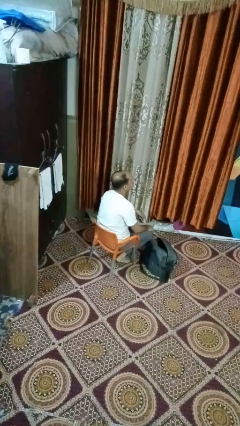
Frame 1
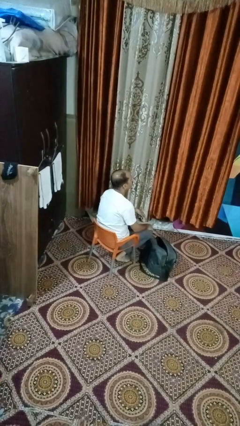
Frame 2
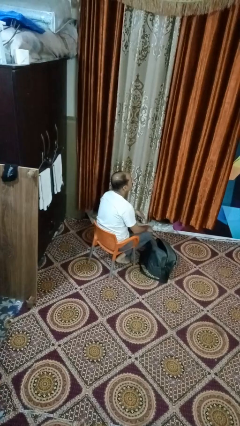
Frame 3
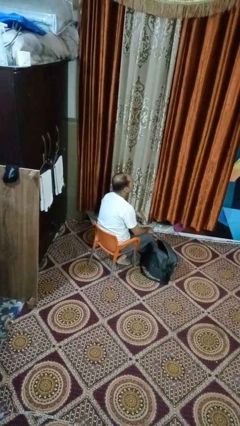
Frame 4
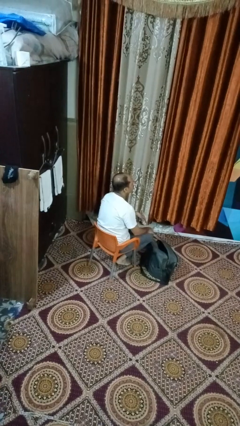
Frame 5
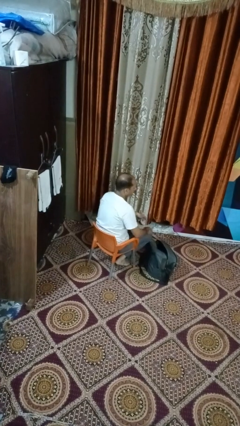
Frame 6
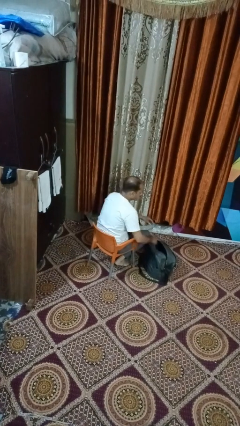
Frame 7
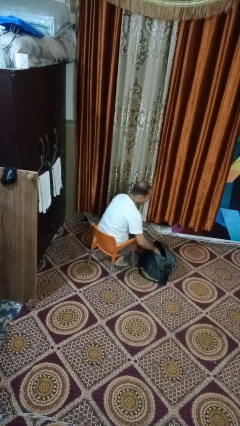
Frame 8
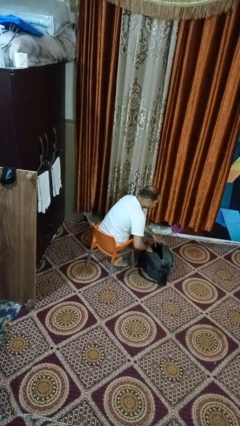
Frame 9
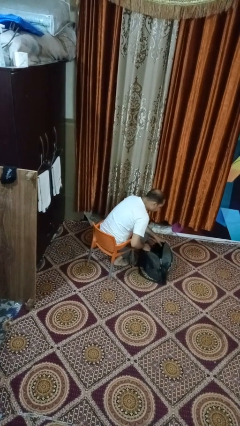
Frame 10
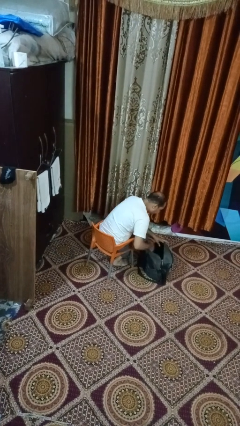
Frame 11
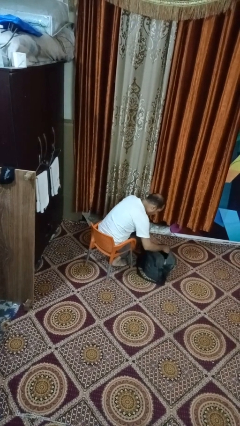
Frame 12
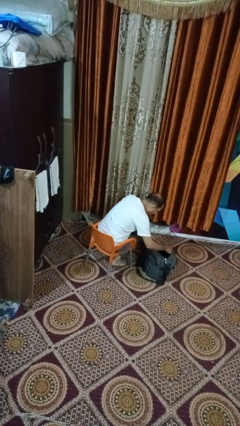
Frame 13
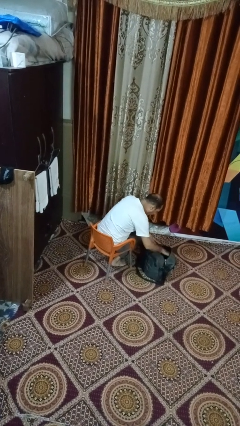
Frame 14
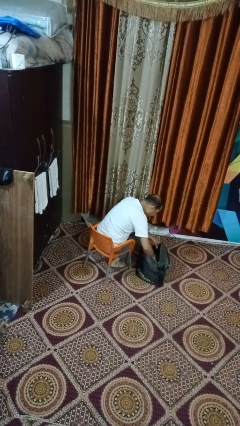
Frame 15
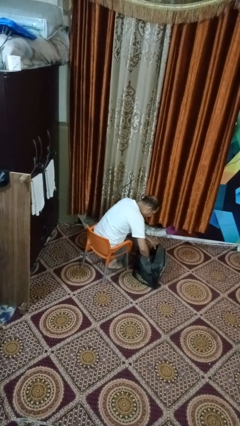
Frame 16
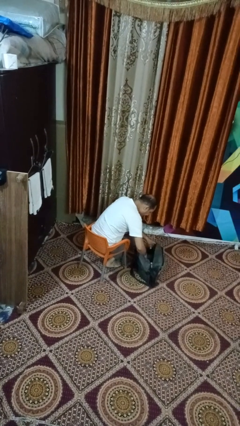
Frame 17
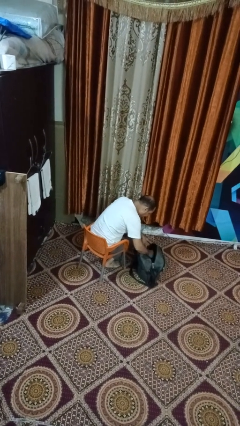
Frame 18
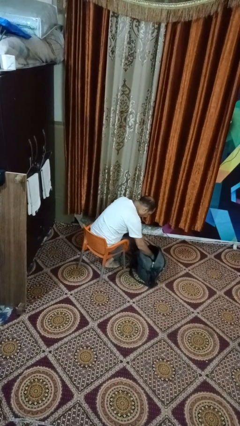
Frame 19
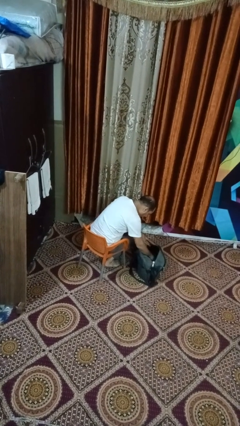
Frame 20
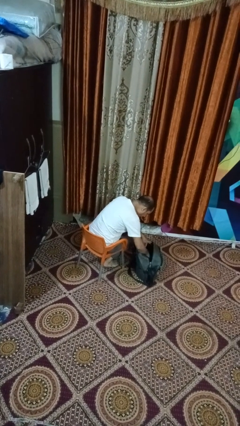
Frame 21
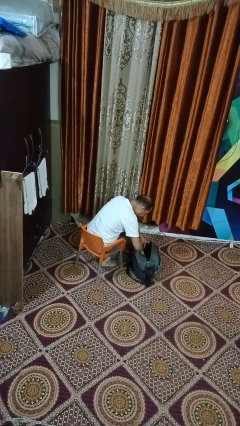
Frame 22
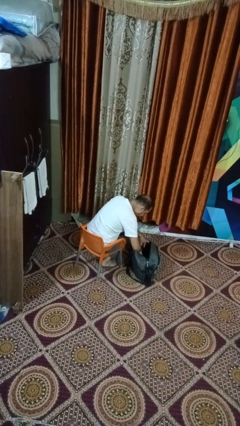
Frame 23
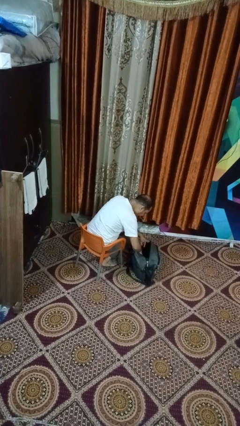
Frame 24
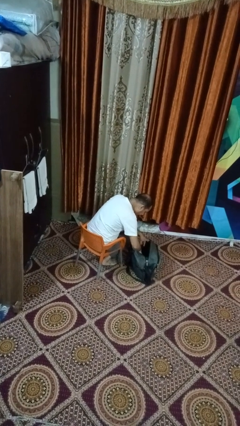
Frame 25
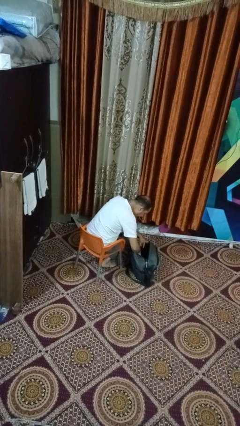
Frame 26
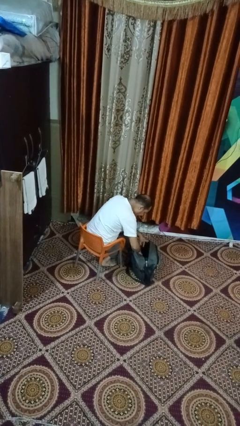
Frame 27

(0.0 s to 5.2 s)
person searches in backpack

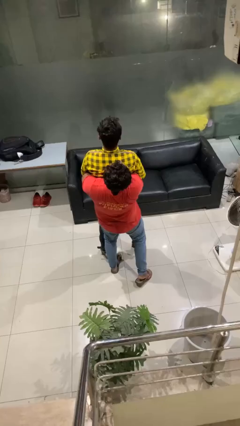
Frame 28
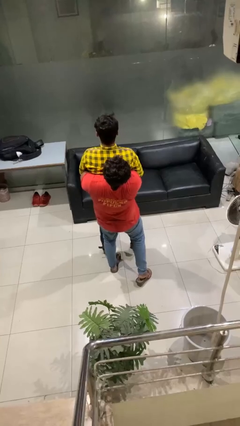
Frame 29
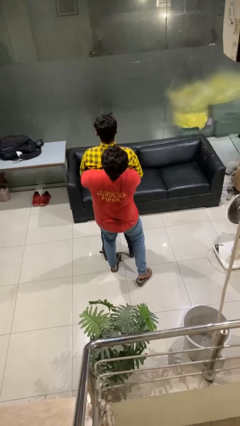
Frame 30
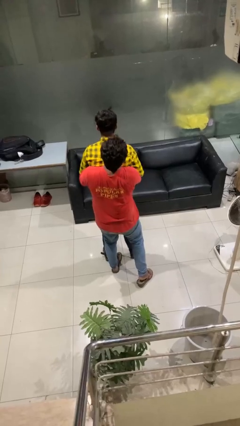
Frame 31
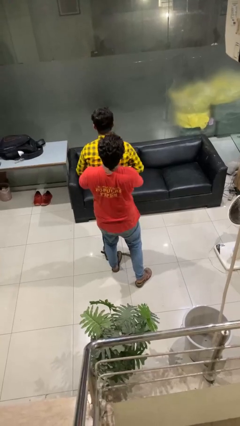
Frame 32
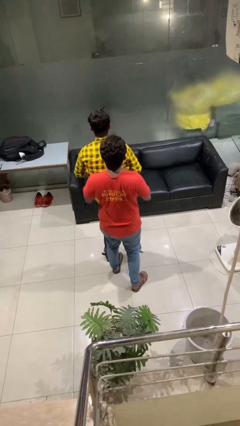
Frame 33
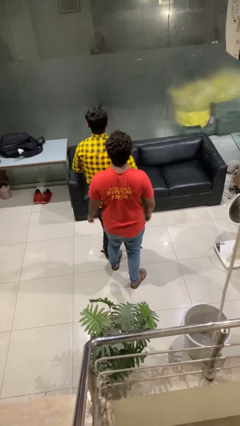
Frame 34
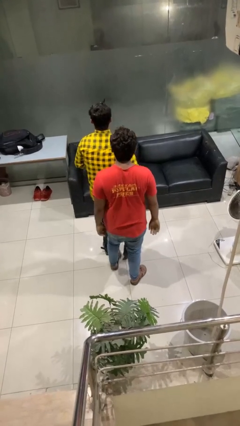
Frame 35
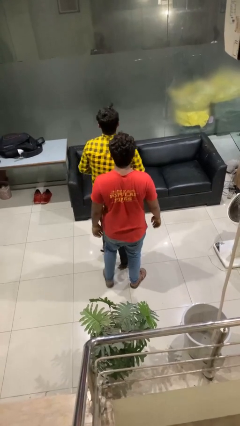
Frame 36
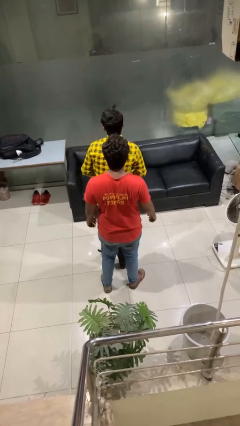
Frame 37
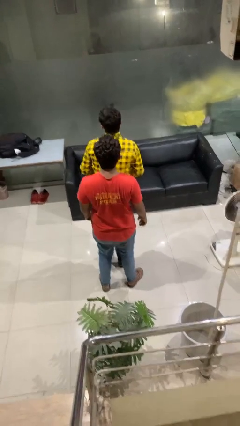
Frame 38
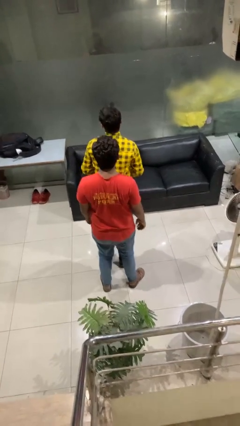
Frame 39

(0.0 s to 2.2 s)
person puts down person

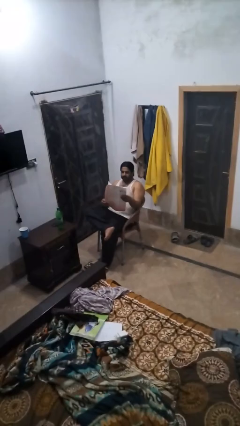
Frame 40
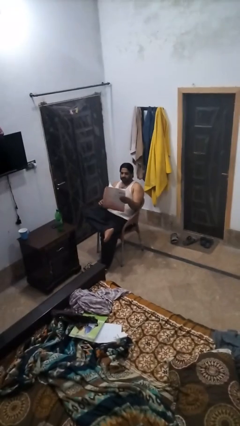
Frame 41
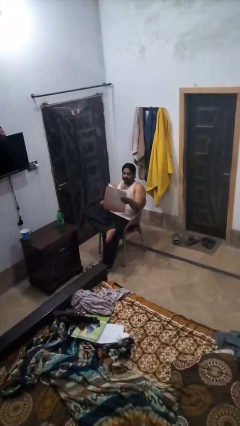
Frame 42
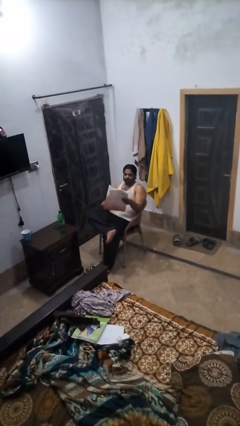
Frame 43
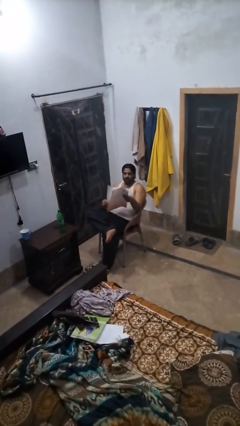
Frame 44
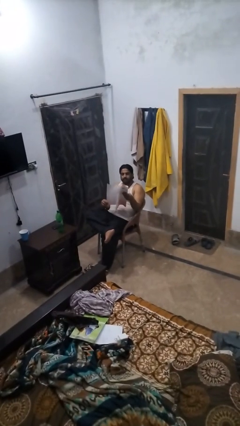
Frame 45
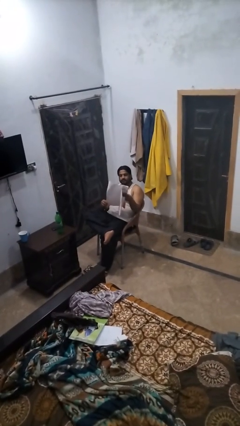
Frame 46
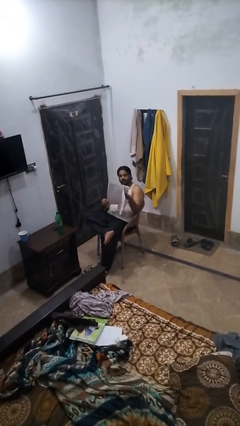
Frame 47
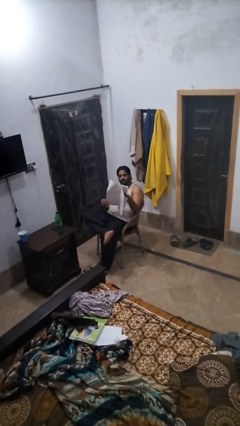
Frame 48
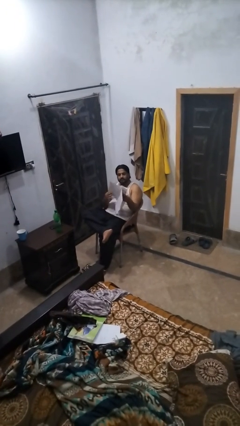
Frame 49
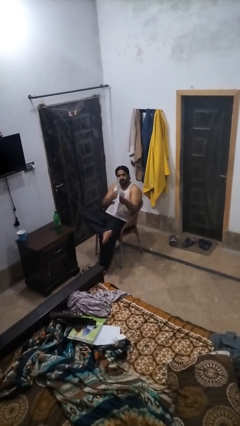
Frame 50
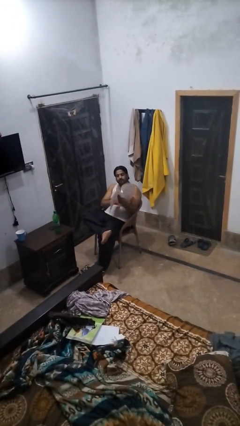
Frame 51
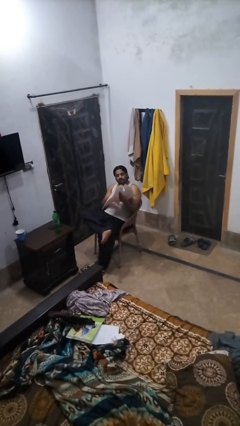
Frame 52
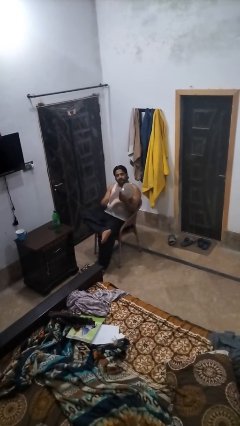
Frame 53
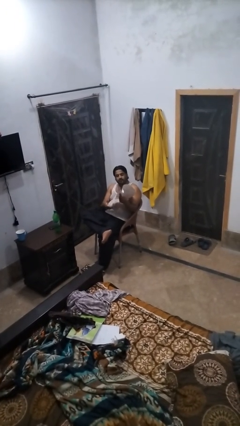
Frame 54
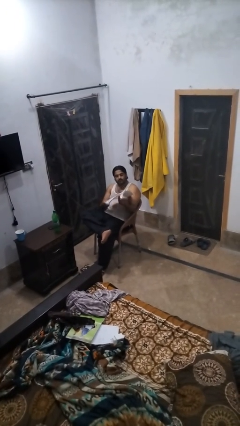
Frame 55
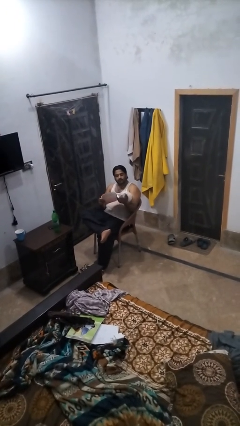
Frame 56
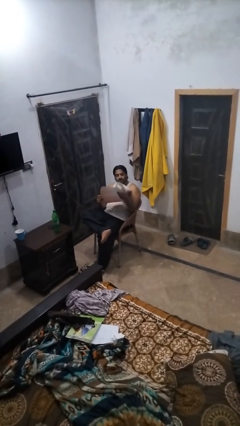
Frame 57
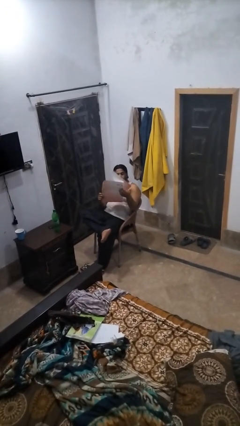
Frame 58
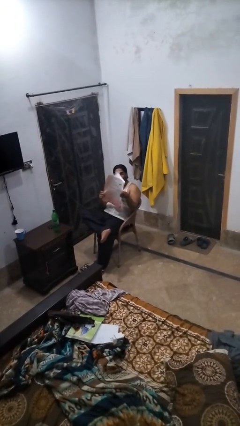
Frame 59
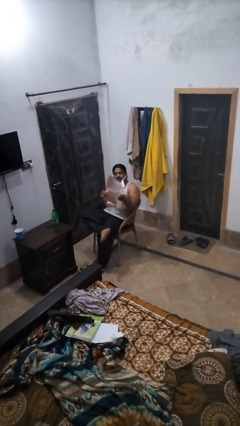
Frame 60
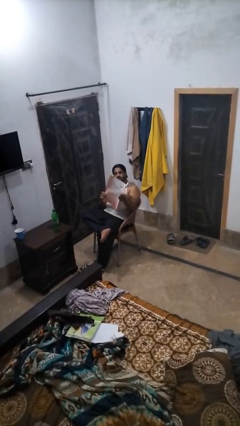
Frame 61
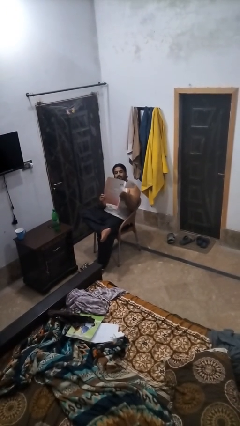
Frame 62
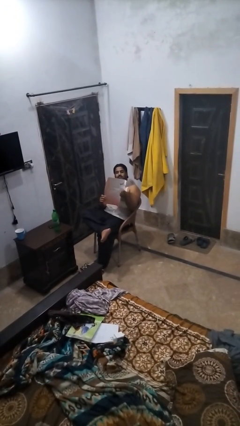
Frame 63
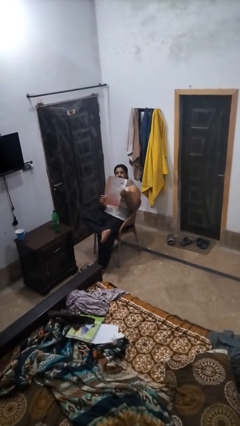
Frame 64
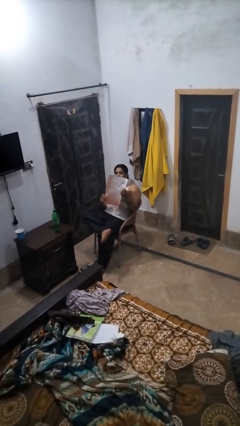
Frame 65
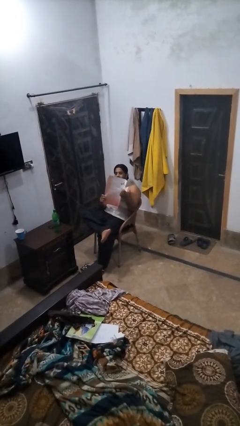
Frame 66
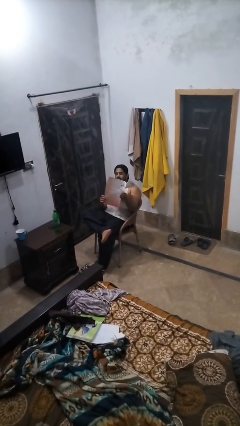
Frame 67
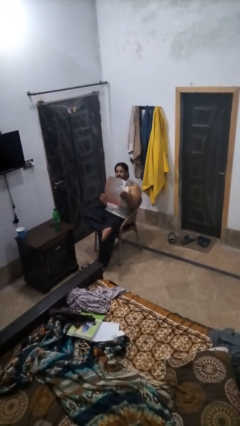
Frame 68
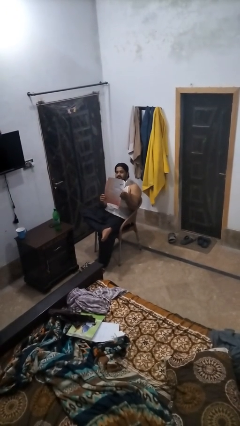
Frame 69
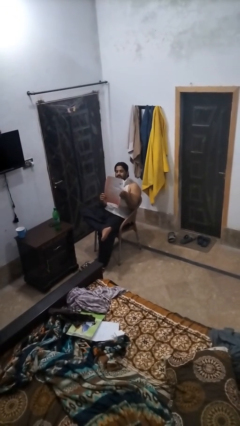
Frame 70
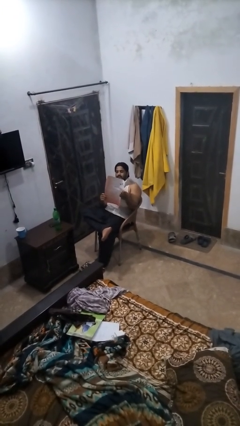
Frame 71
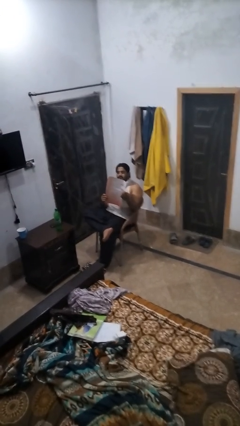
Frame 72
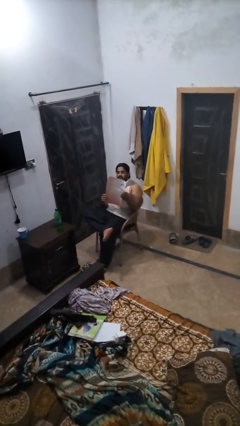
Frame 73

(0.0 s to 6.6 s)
person reads newspaper

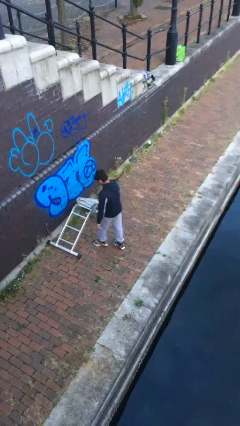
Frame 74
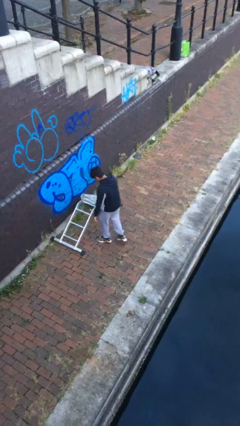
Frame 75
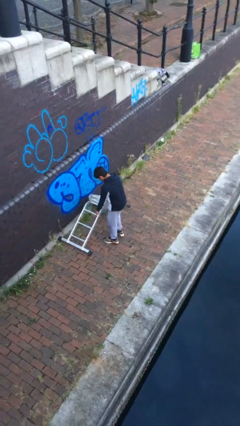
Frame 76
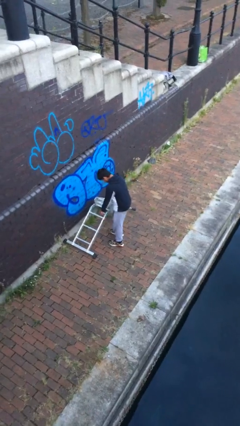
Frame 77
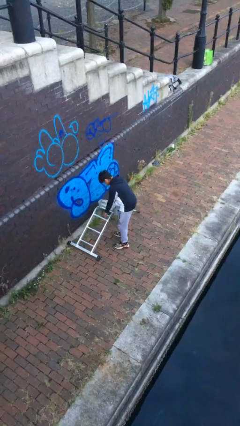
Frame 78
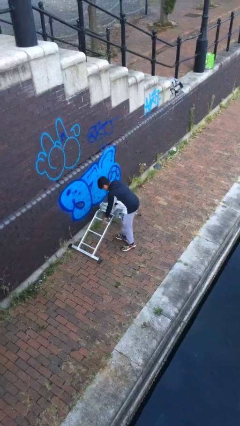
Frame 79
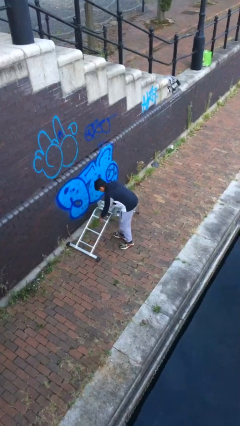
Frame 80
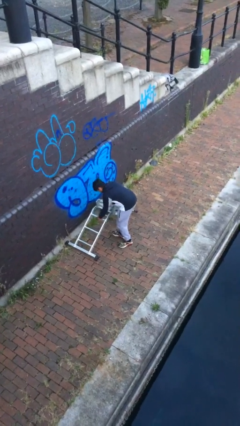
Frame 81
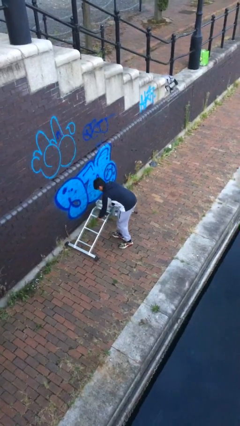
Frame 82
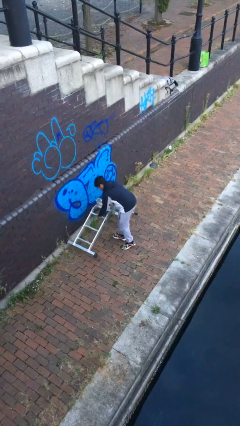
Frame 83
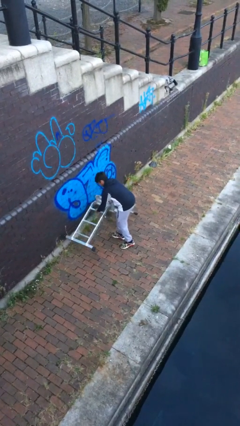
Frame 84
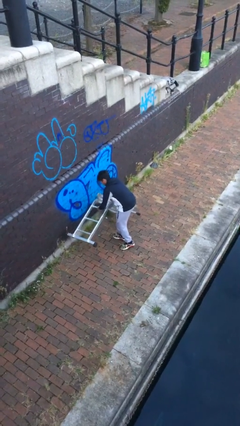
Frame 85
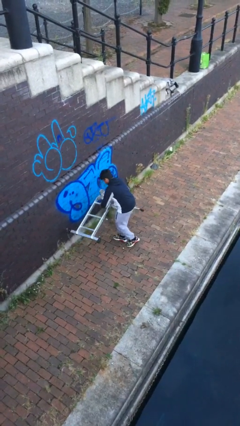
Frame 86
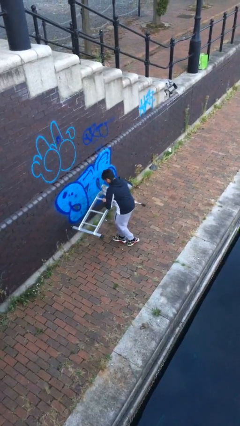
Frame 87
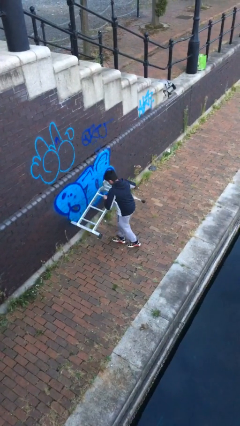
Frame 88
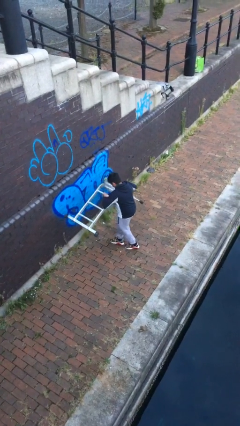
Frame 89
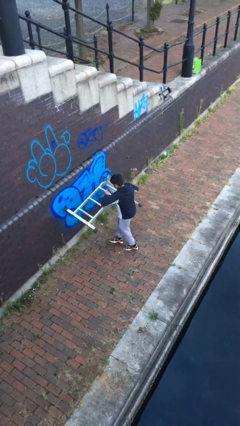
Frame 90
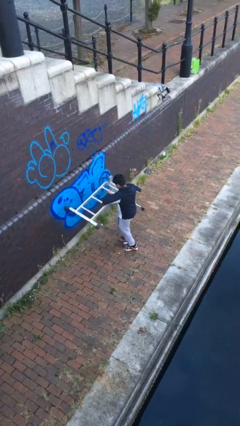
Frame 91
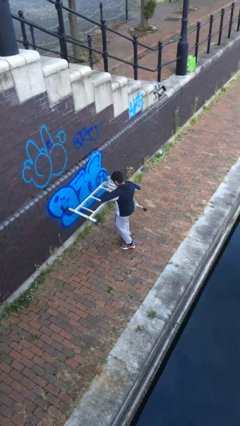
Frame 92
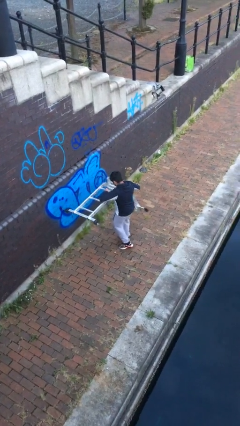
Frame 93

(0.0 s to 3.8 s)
person picks up object from floor
